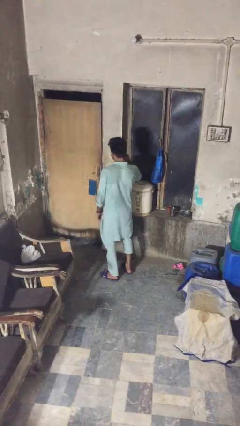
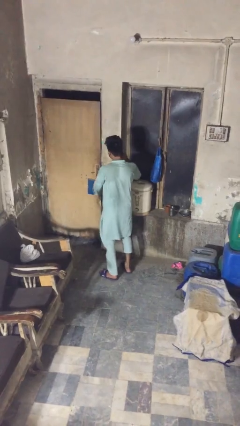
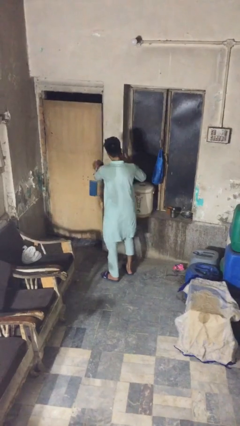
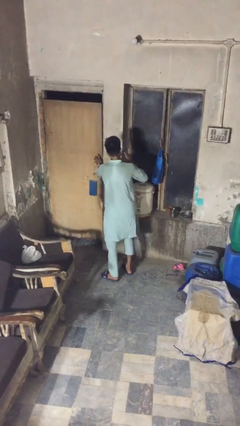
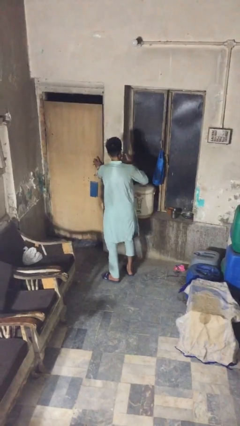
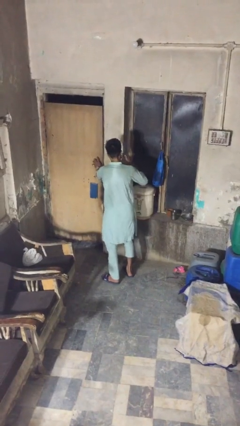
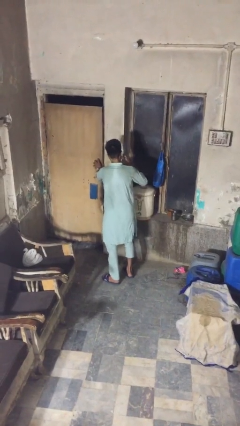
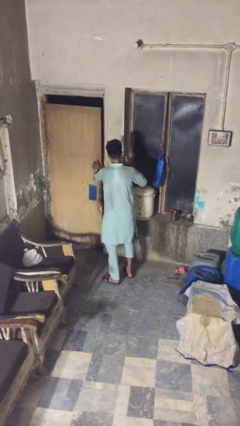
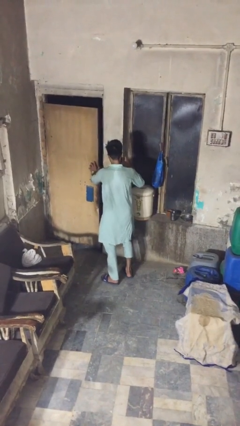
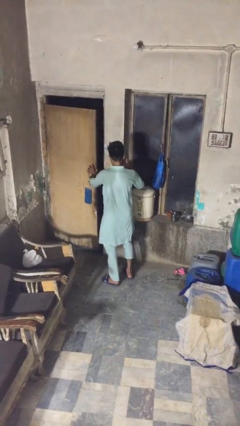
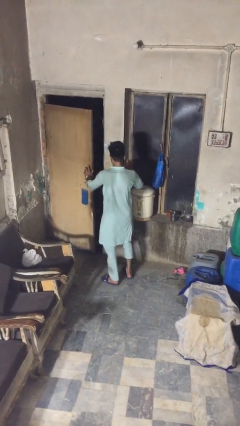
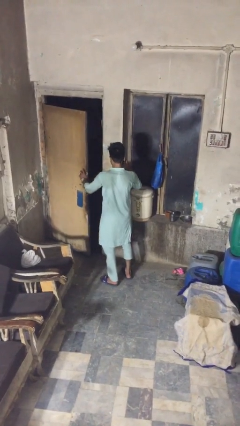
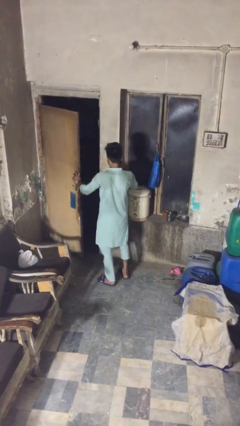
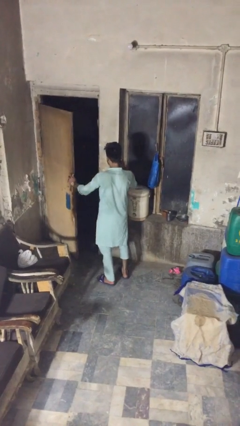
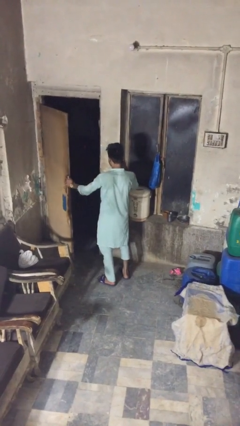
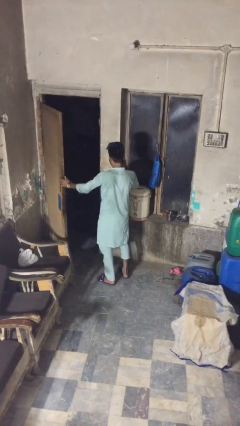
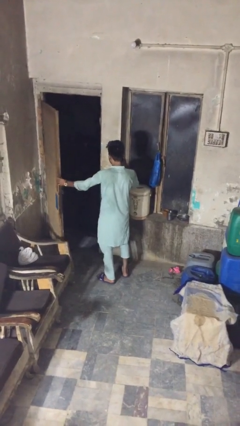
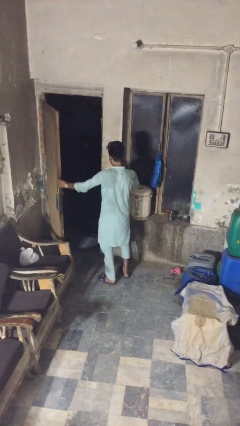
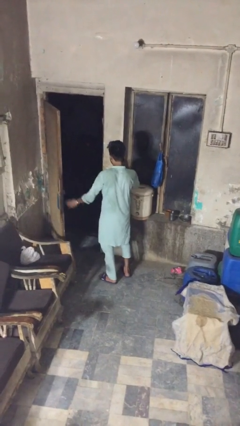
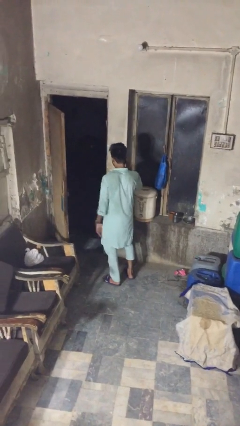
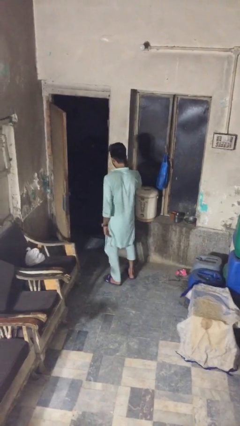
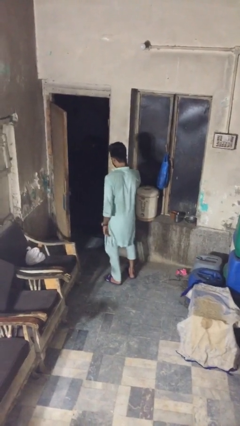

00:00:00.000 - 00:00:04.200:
person opens facility door

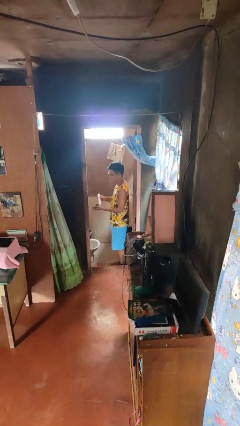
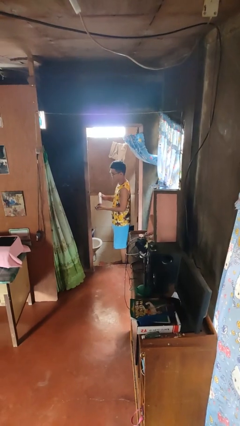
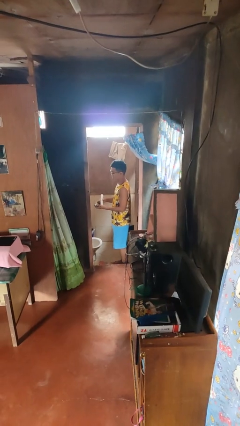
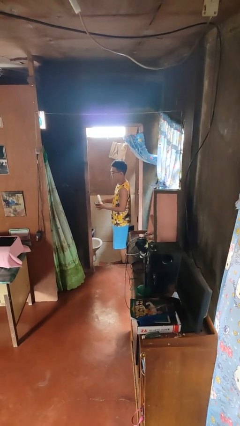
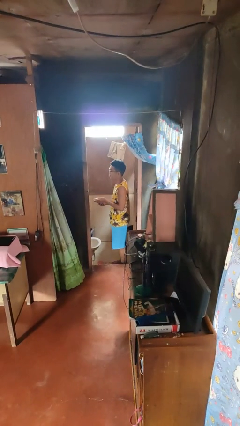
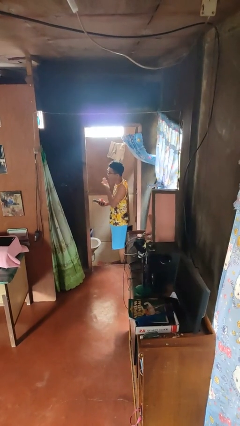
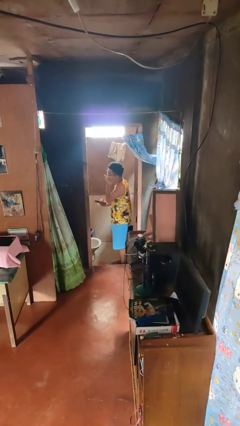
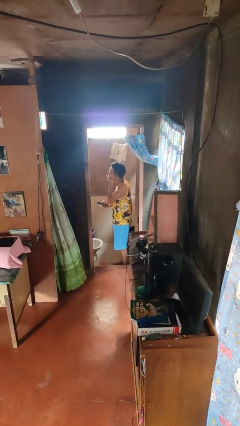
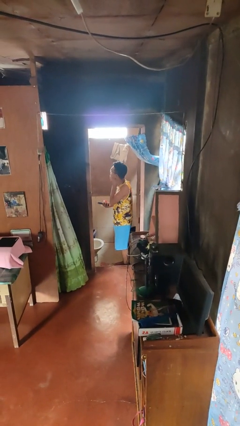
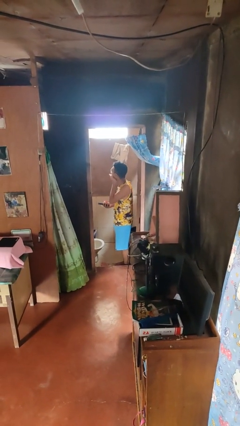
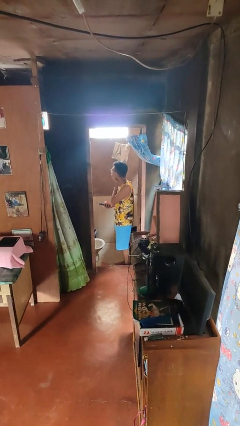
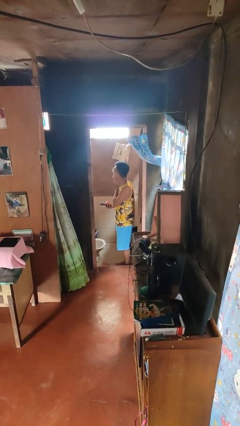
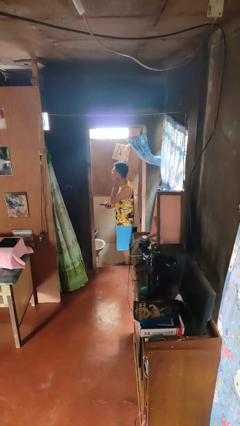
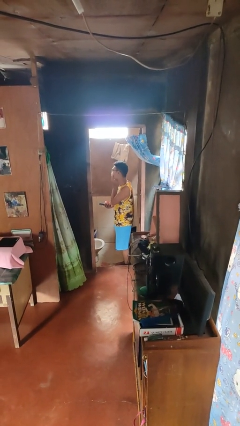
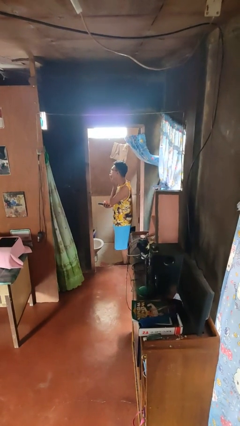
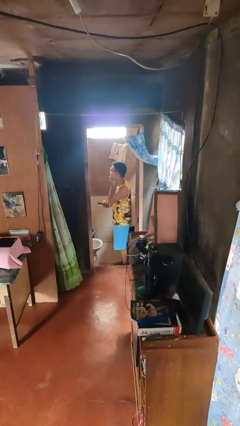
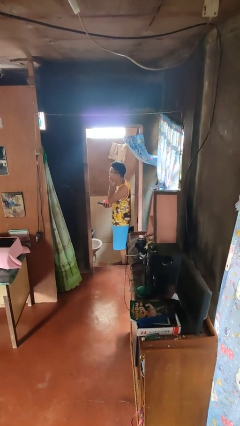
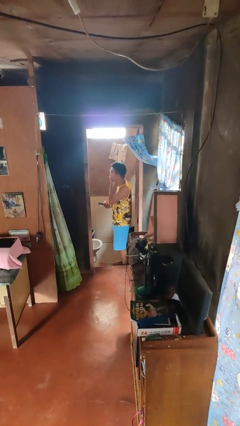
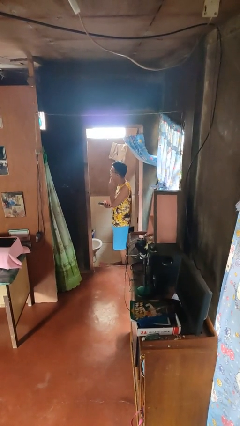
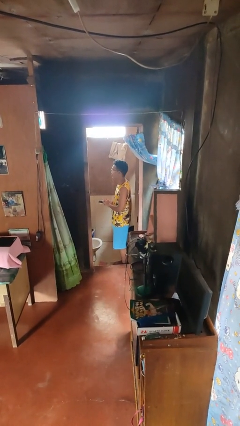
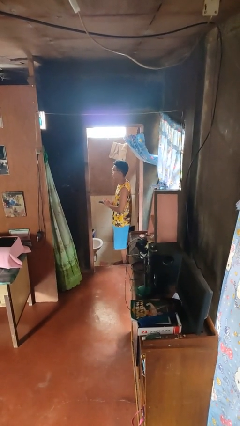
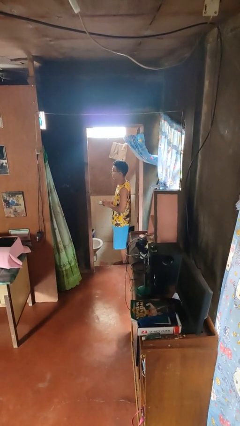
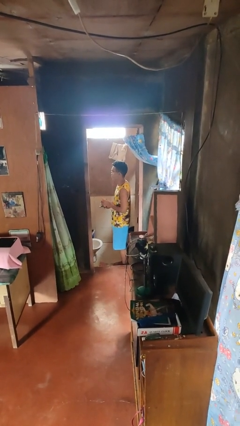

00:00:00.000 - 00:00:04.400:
person applies shaving cream

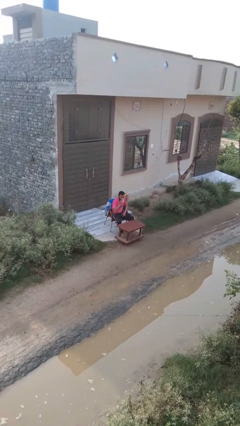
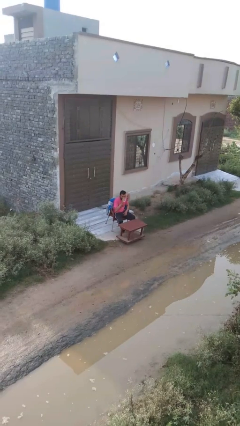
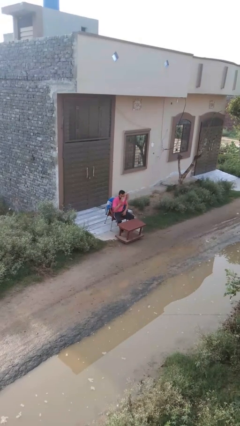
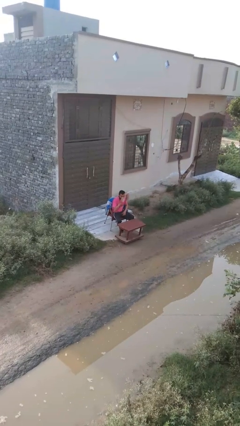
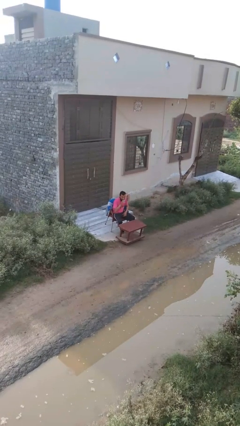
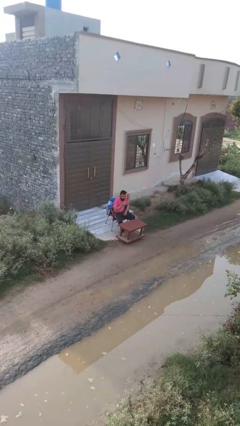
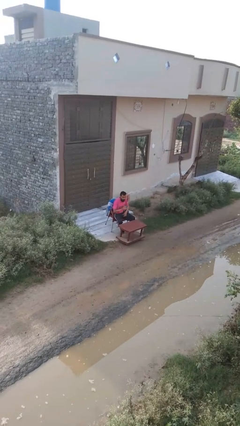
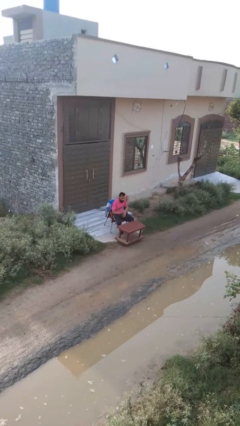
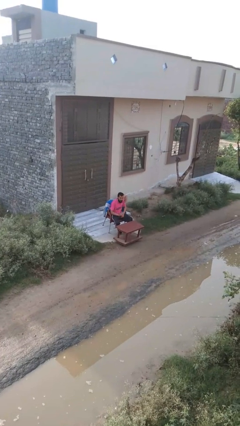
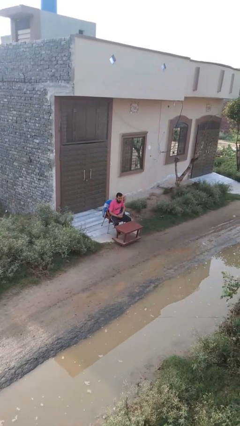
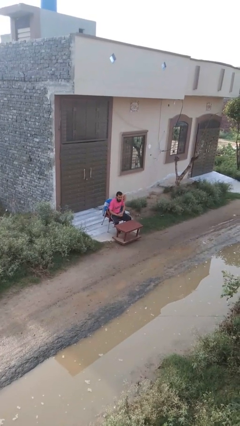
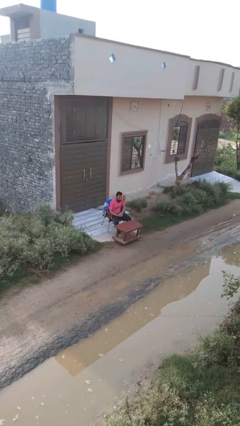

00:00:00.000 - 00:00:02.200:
person drinks from mug

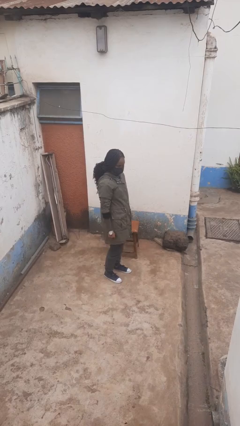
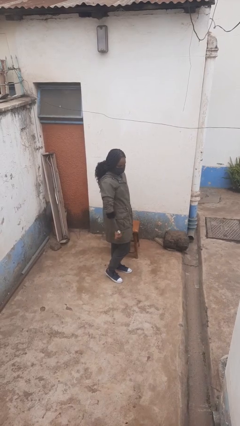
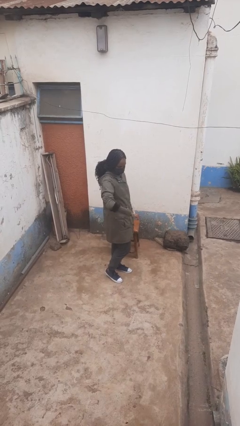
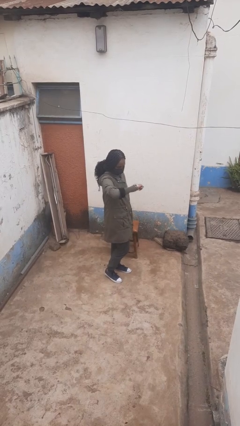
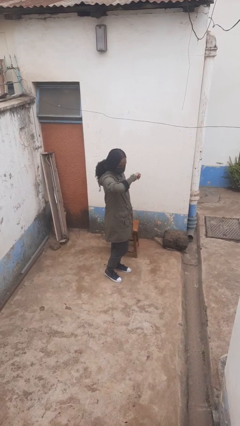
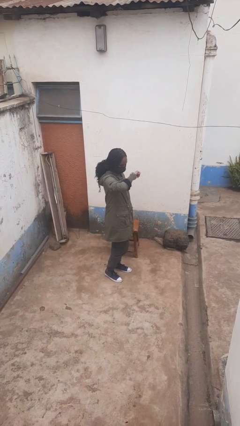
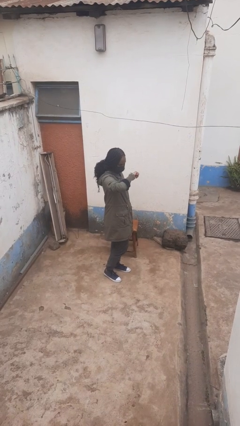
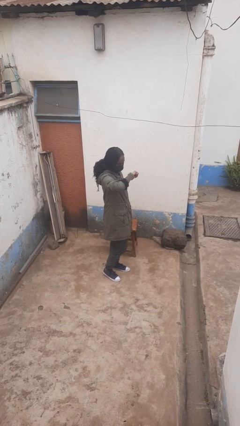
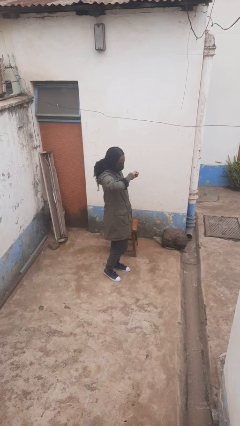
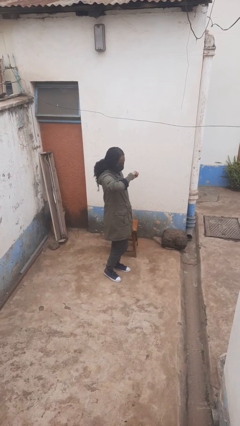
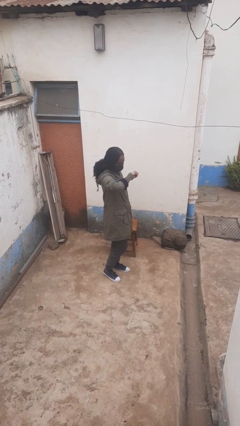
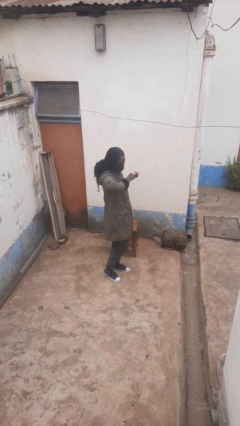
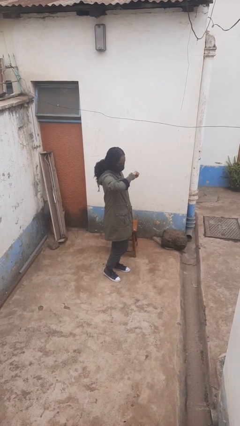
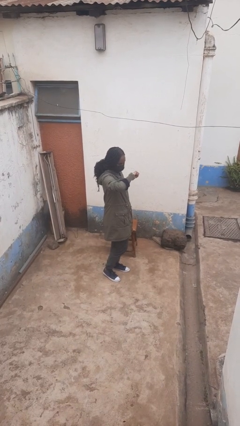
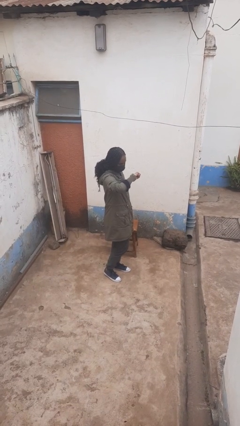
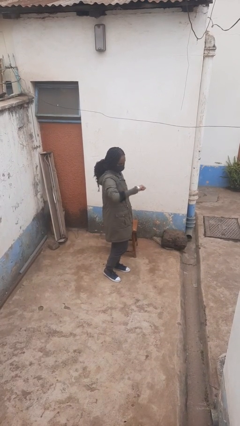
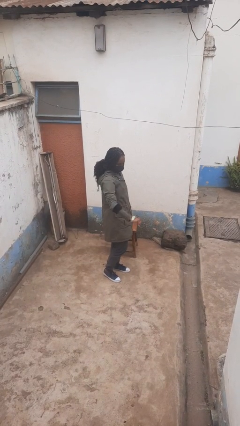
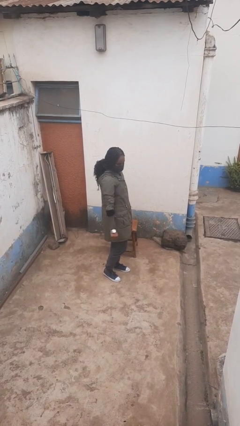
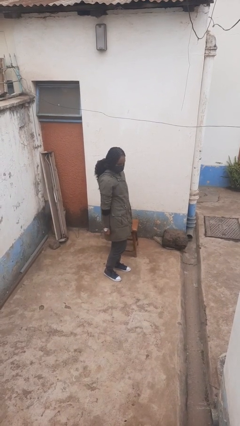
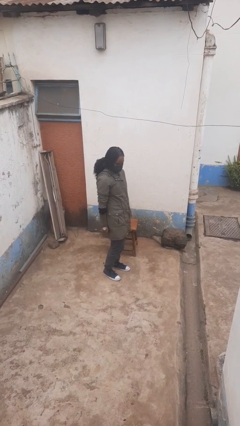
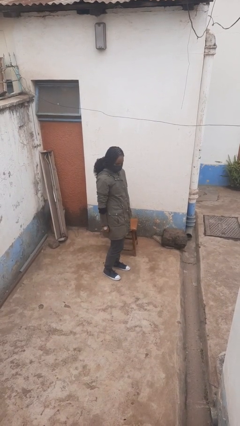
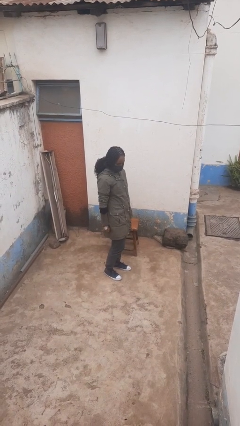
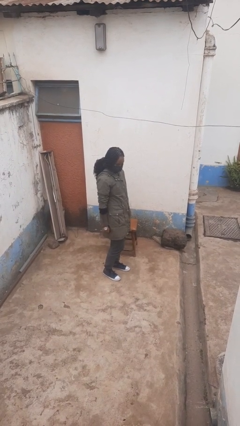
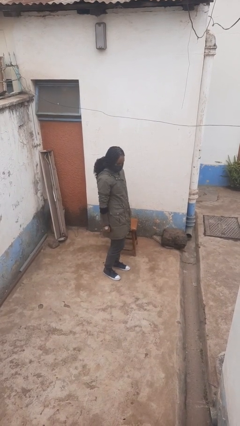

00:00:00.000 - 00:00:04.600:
person looks at wristwatch

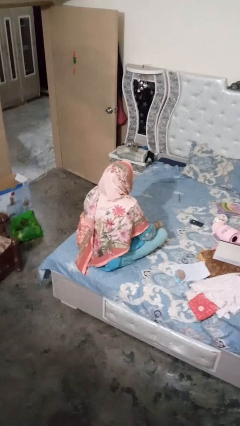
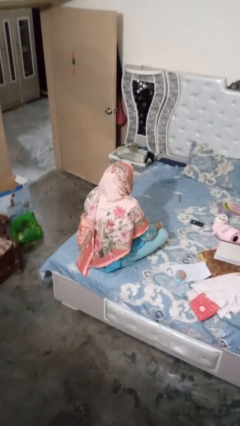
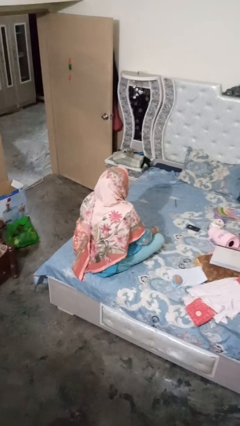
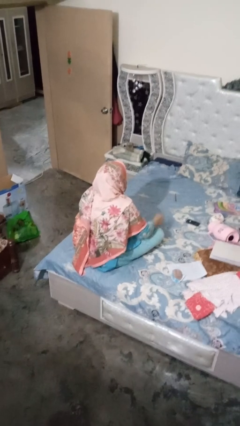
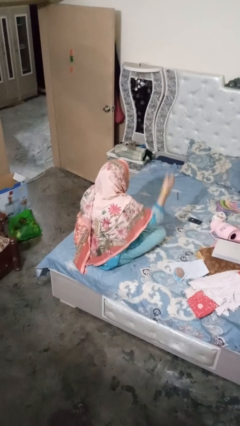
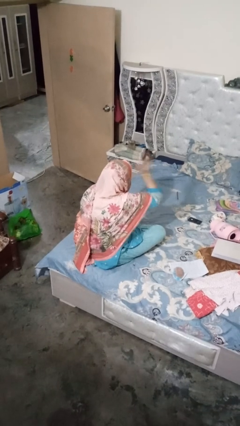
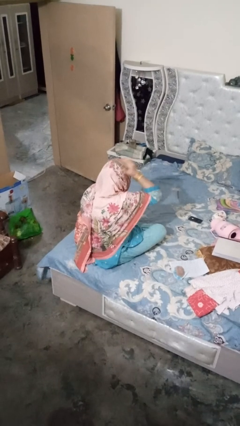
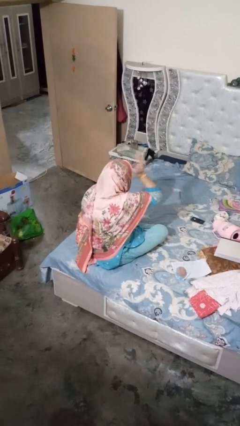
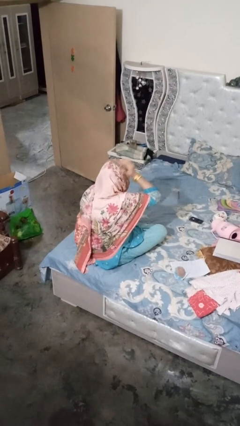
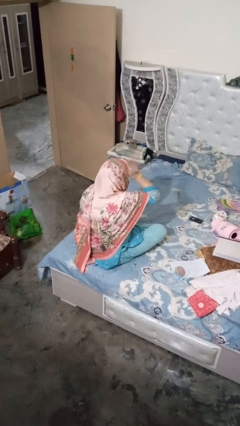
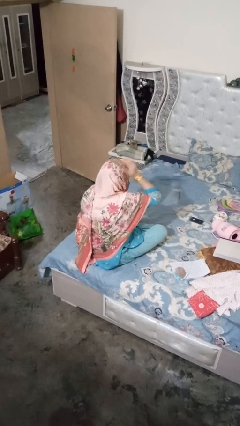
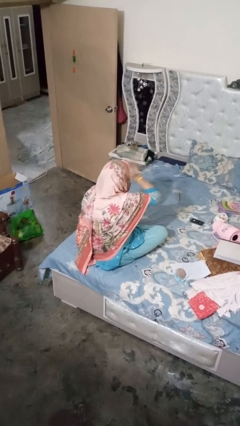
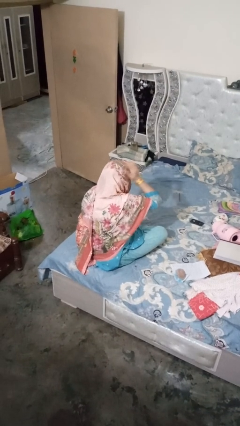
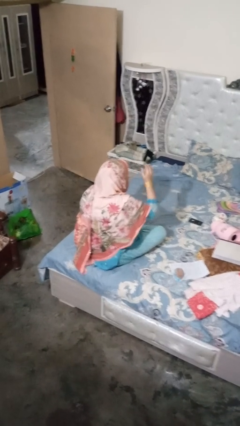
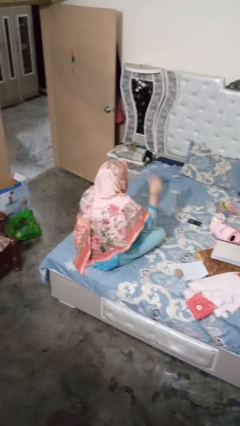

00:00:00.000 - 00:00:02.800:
person pats head
